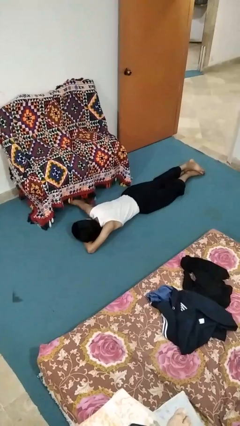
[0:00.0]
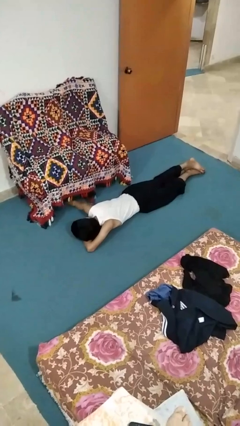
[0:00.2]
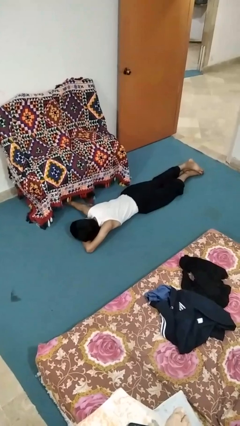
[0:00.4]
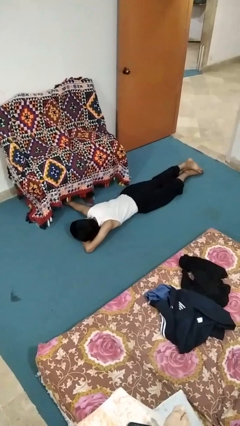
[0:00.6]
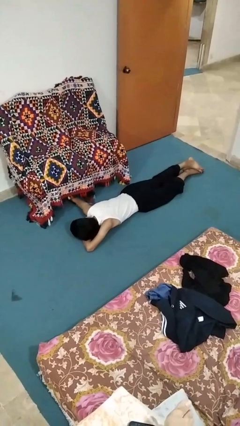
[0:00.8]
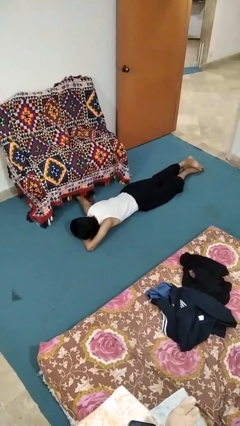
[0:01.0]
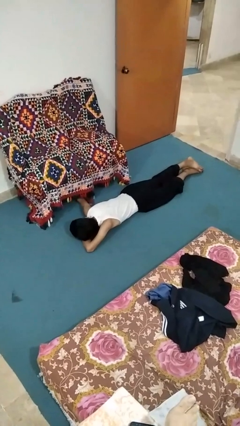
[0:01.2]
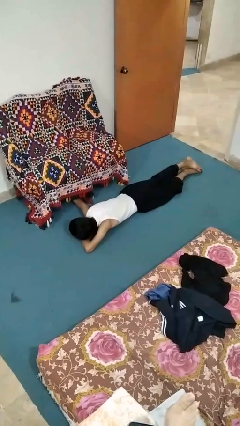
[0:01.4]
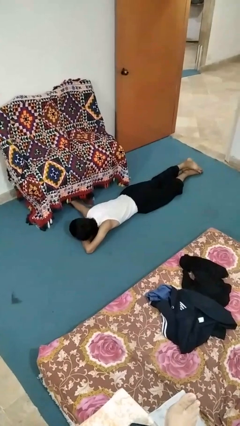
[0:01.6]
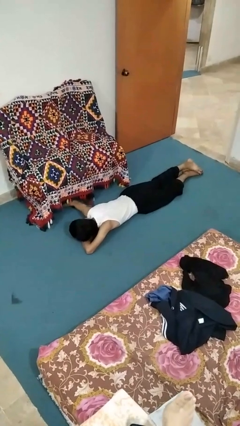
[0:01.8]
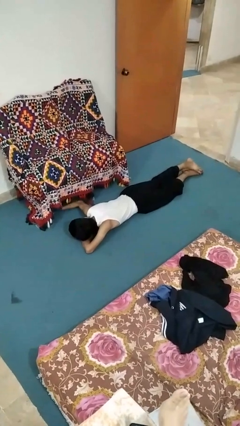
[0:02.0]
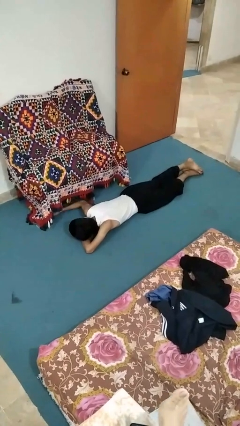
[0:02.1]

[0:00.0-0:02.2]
person searches under couch

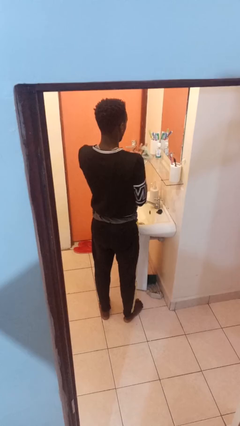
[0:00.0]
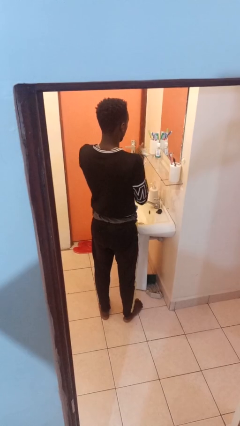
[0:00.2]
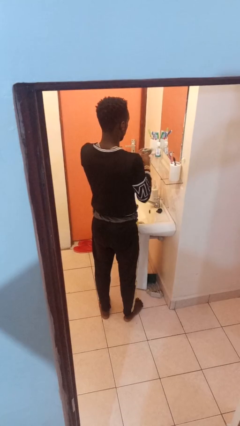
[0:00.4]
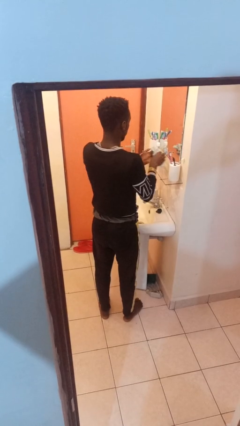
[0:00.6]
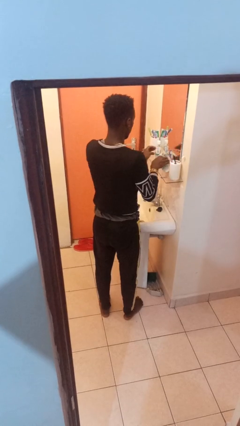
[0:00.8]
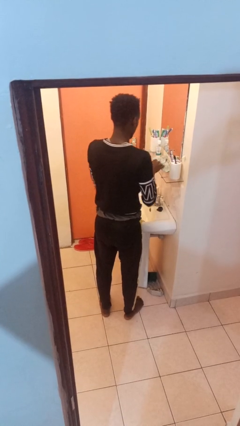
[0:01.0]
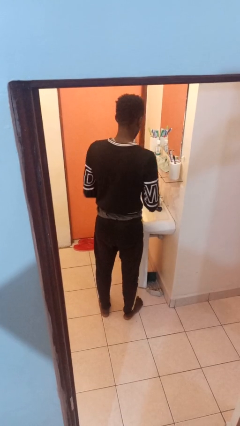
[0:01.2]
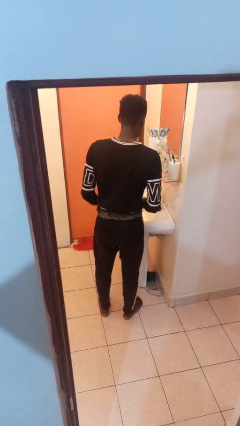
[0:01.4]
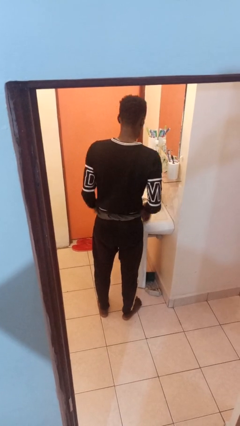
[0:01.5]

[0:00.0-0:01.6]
person dries hands with towel

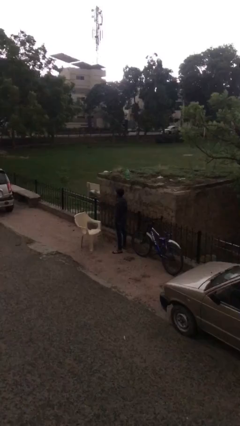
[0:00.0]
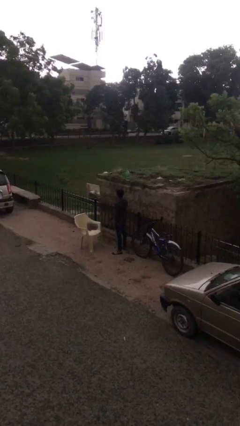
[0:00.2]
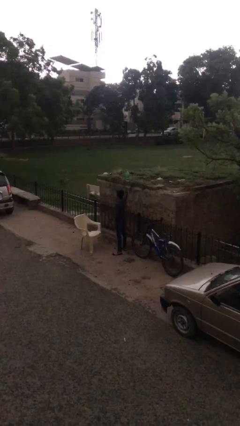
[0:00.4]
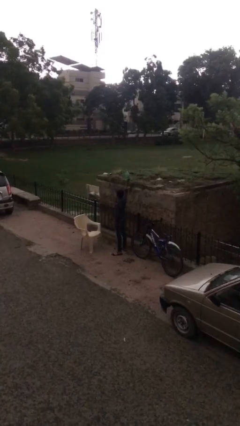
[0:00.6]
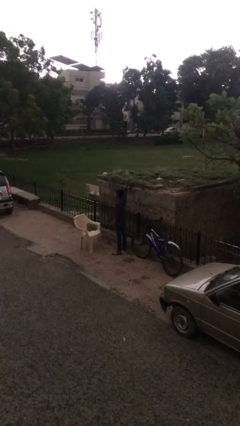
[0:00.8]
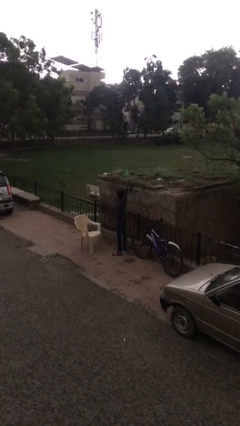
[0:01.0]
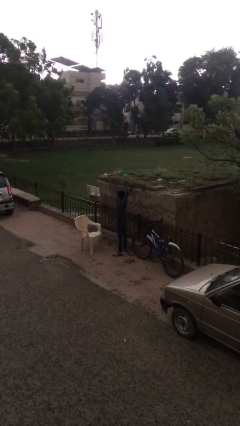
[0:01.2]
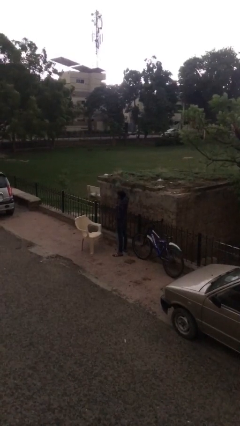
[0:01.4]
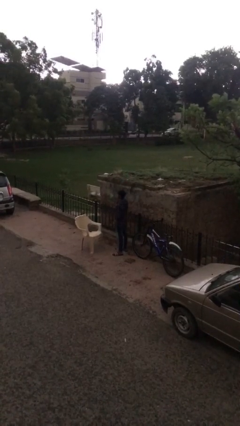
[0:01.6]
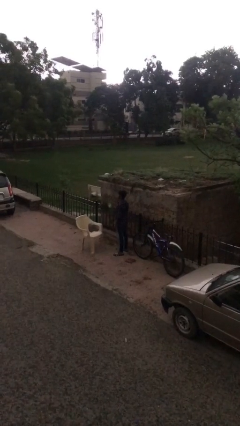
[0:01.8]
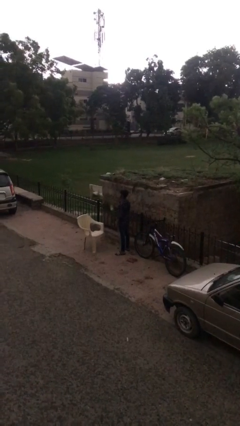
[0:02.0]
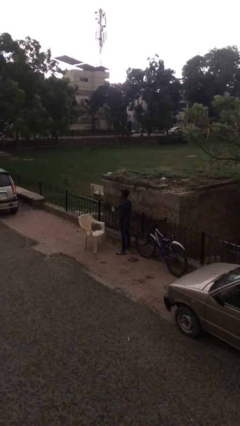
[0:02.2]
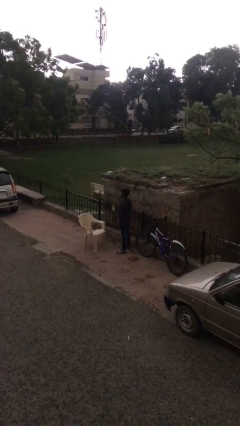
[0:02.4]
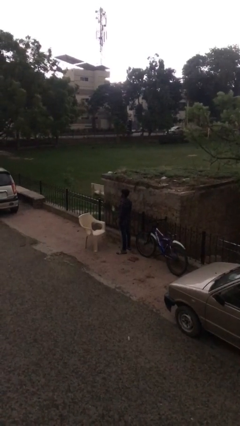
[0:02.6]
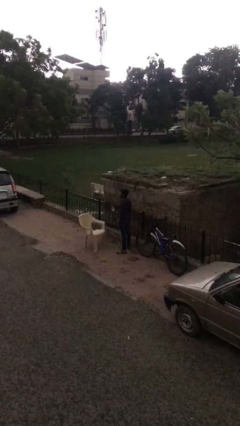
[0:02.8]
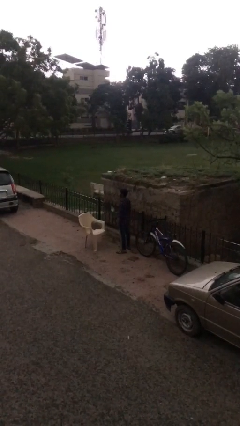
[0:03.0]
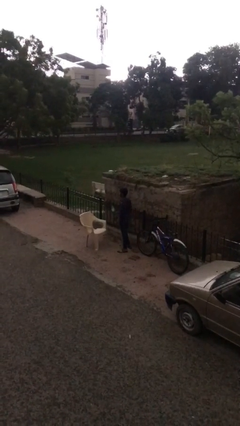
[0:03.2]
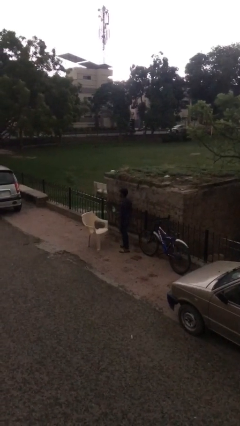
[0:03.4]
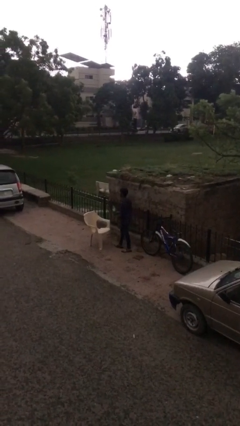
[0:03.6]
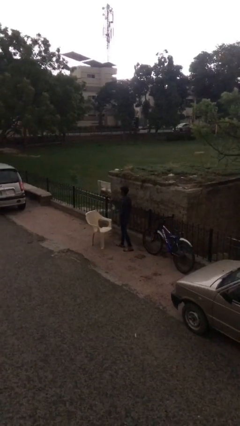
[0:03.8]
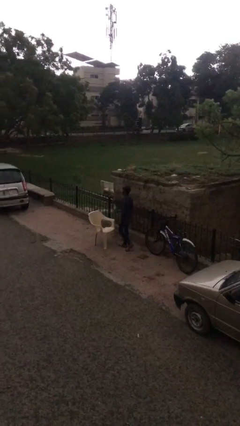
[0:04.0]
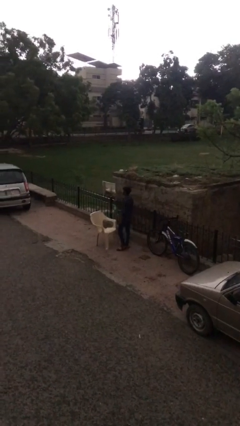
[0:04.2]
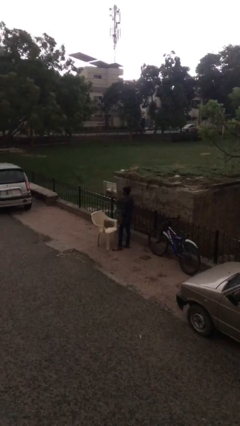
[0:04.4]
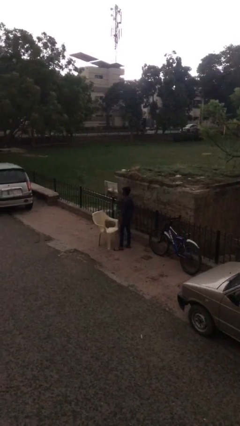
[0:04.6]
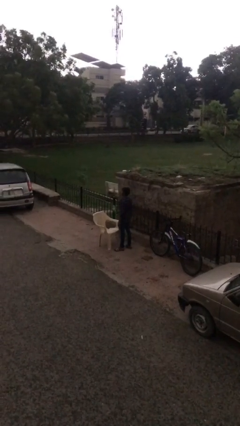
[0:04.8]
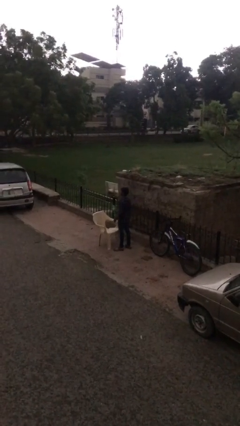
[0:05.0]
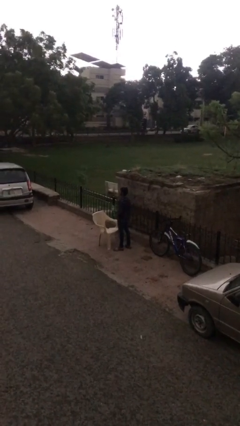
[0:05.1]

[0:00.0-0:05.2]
person picks up object from shelf

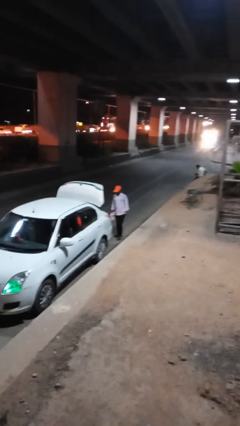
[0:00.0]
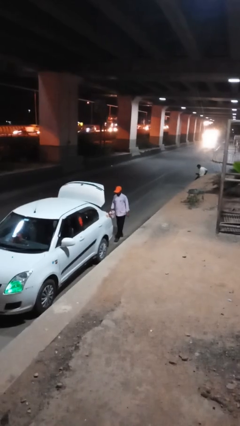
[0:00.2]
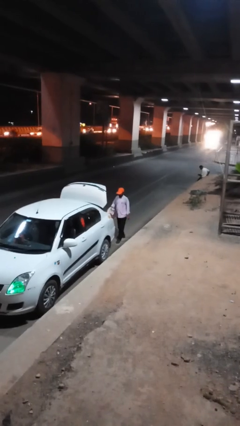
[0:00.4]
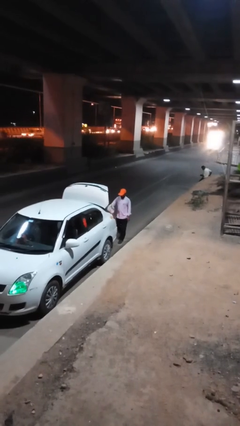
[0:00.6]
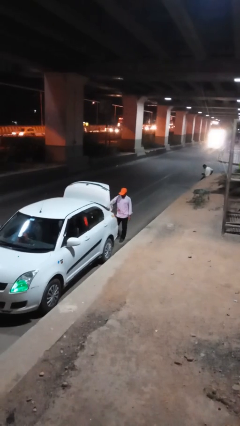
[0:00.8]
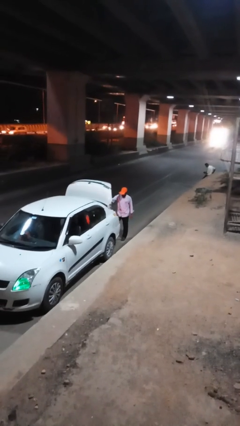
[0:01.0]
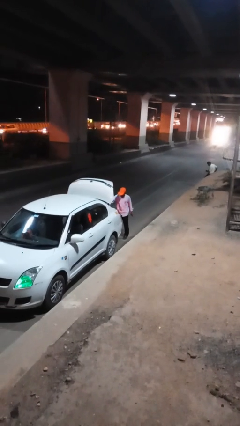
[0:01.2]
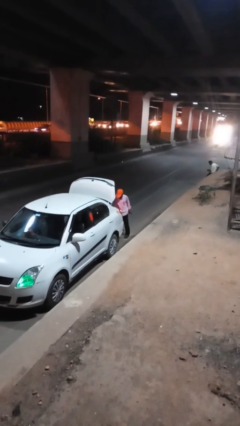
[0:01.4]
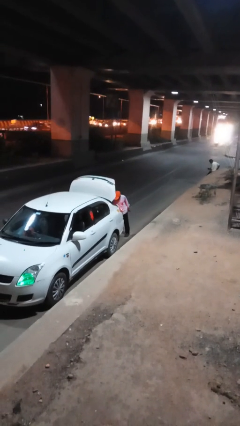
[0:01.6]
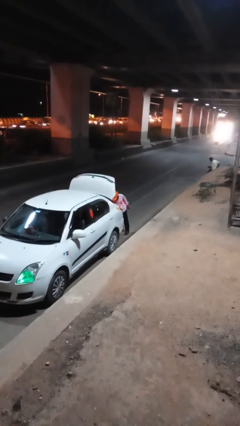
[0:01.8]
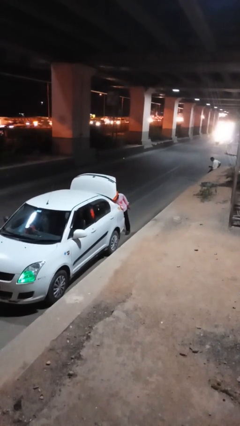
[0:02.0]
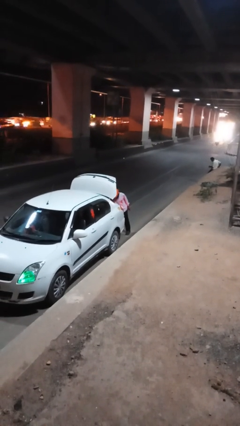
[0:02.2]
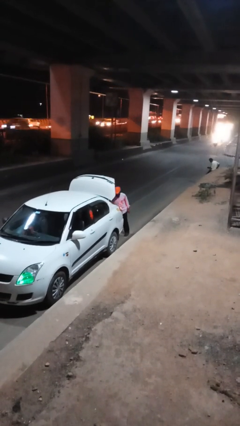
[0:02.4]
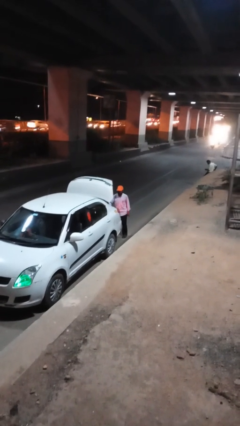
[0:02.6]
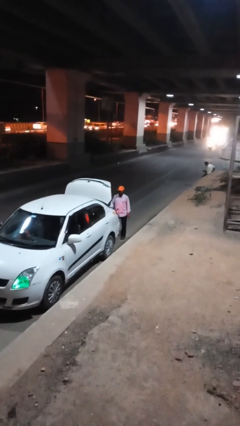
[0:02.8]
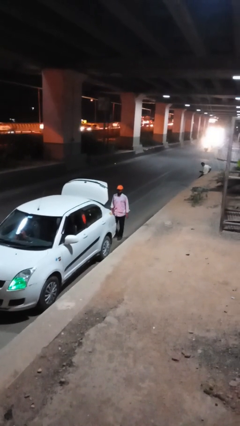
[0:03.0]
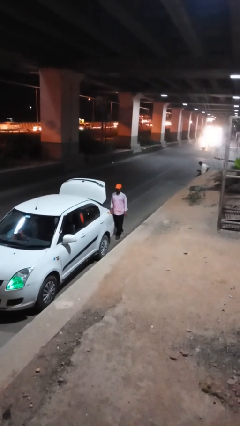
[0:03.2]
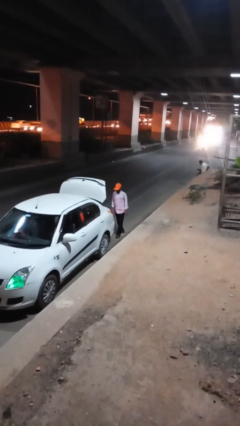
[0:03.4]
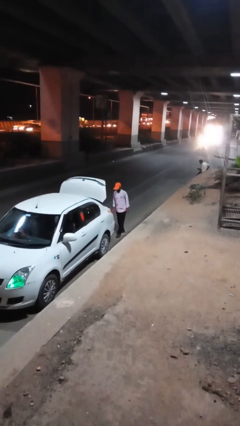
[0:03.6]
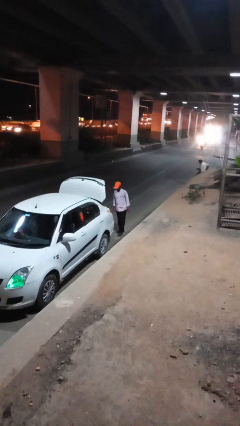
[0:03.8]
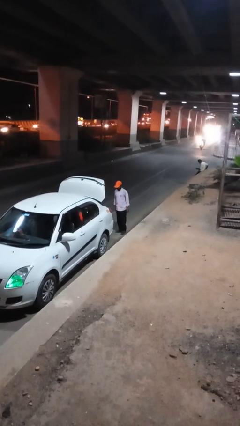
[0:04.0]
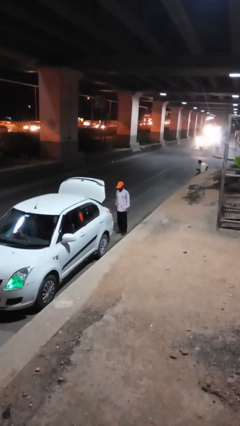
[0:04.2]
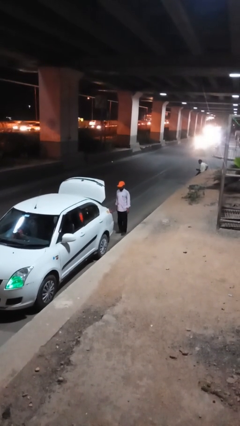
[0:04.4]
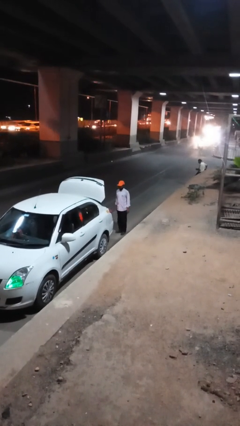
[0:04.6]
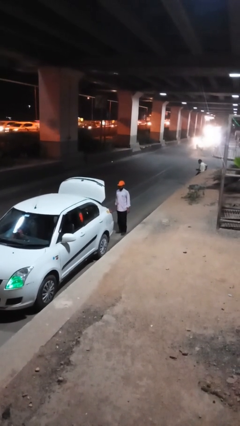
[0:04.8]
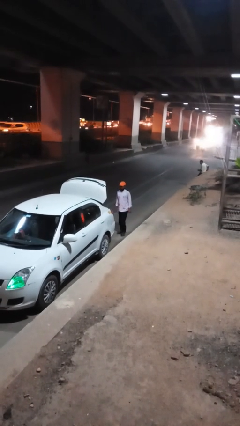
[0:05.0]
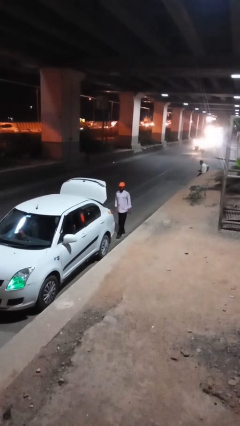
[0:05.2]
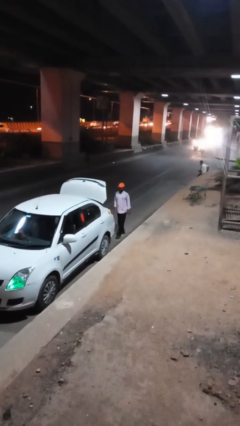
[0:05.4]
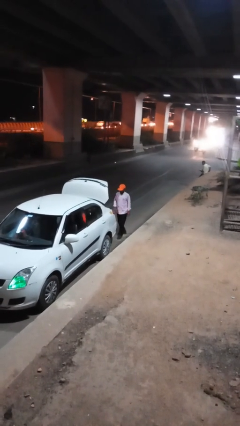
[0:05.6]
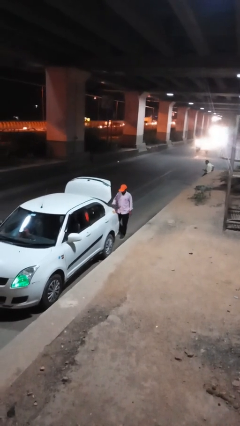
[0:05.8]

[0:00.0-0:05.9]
person loads car

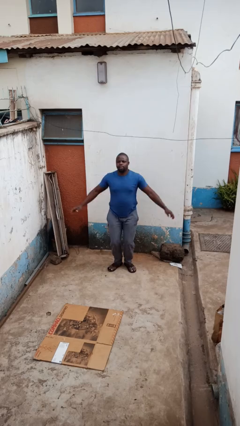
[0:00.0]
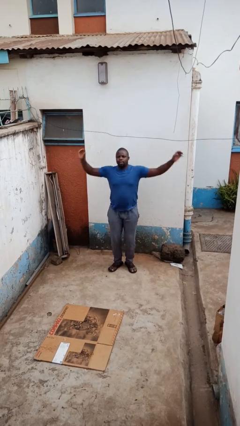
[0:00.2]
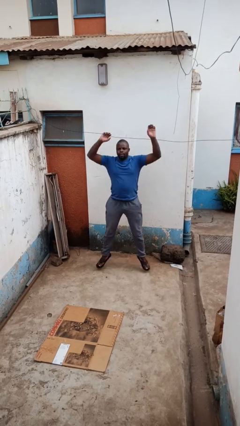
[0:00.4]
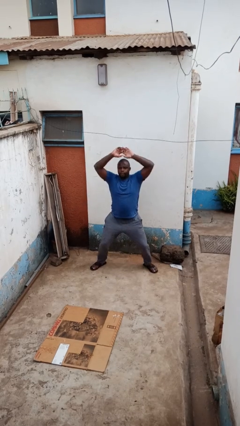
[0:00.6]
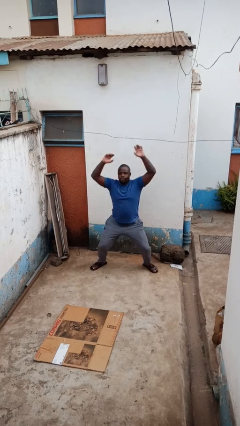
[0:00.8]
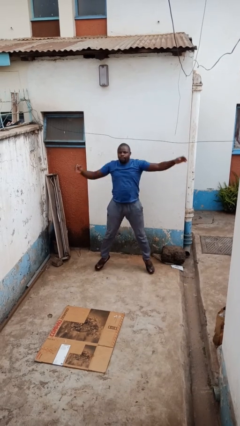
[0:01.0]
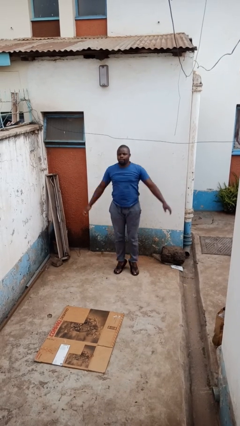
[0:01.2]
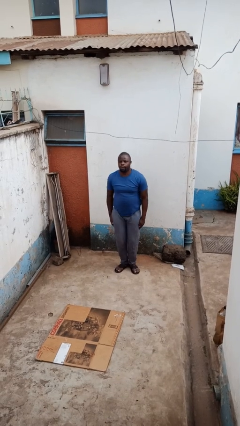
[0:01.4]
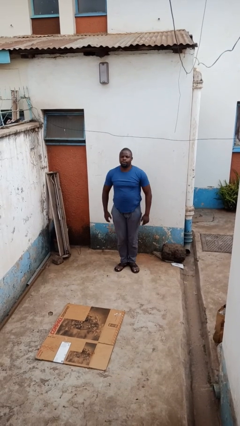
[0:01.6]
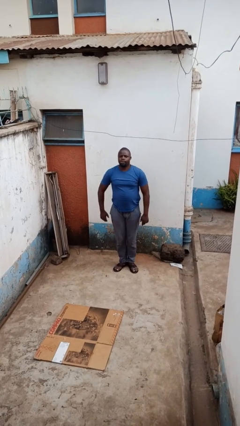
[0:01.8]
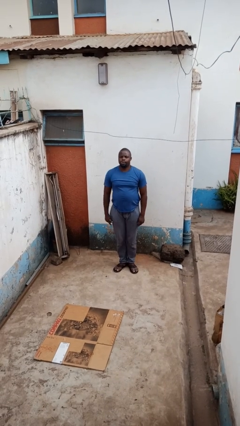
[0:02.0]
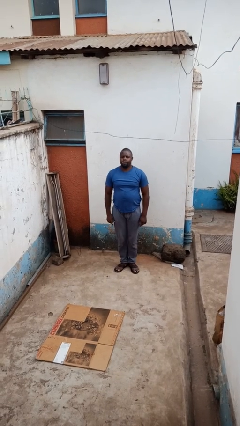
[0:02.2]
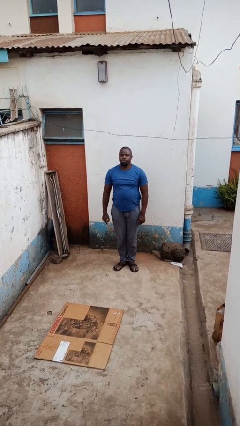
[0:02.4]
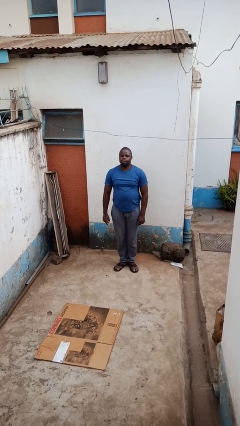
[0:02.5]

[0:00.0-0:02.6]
person exercises with jumping jacks
